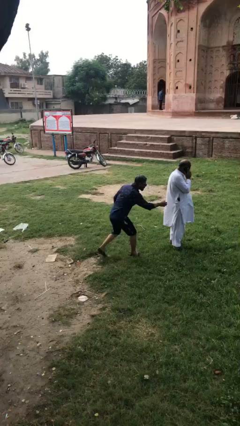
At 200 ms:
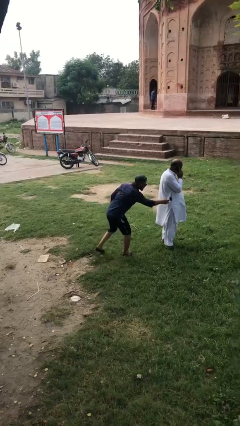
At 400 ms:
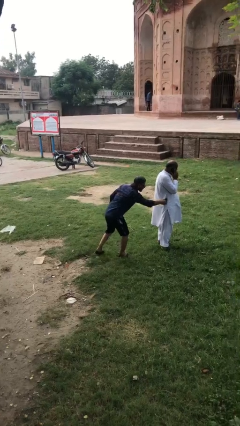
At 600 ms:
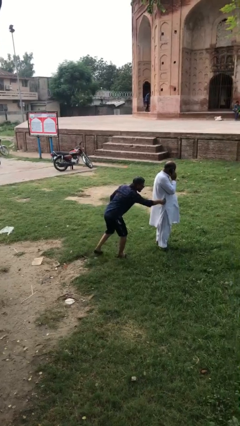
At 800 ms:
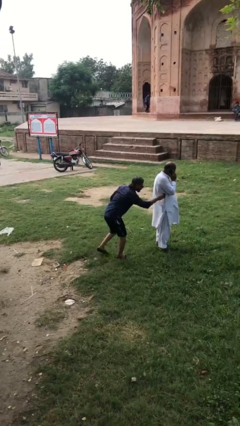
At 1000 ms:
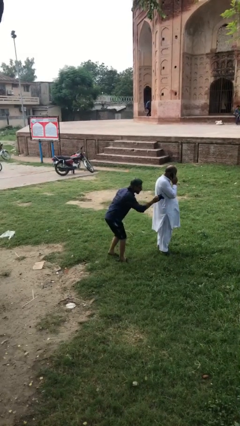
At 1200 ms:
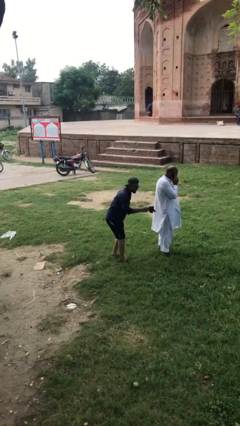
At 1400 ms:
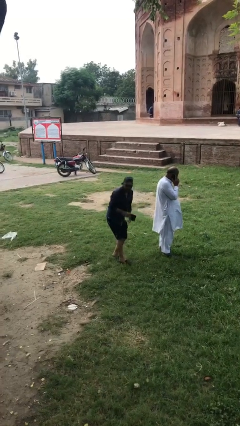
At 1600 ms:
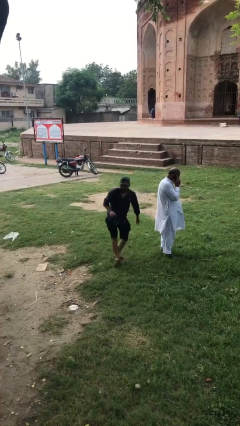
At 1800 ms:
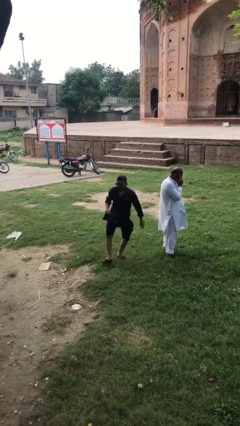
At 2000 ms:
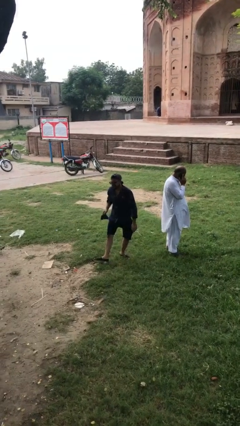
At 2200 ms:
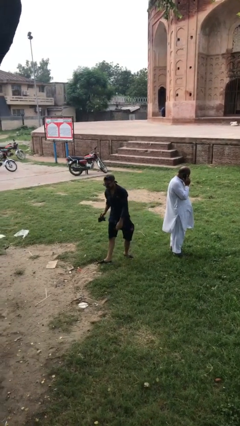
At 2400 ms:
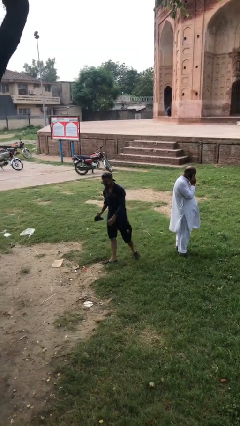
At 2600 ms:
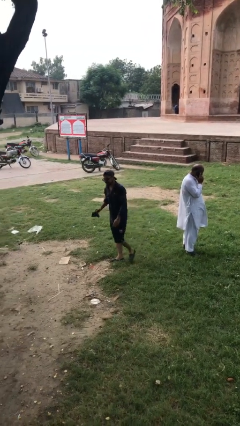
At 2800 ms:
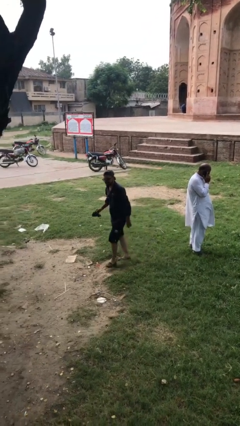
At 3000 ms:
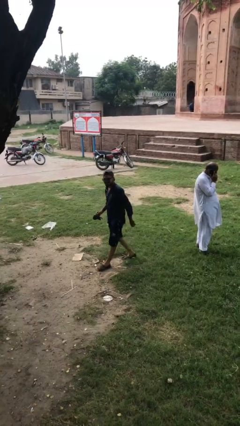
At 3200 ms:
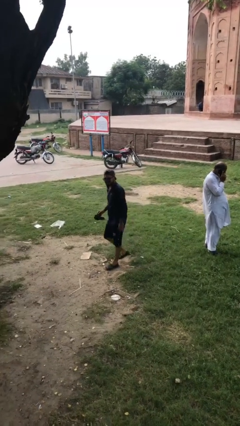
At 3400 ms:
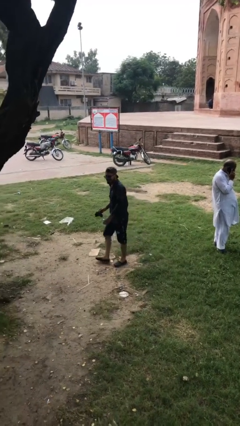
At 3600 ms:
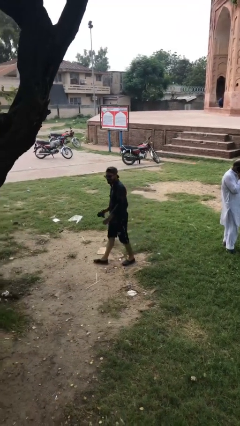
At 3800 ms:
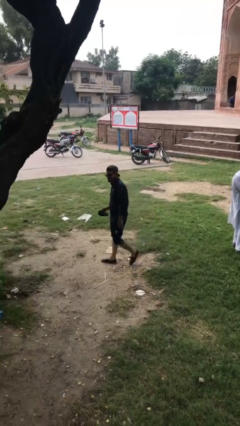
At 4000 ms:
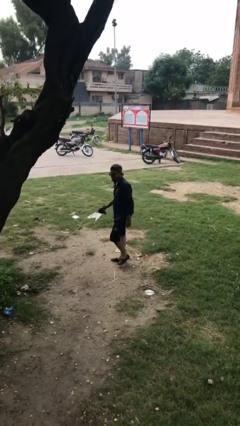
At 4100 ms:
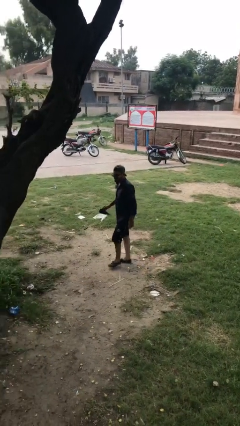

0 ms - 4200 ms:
person steals object from person

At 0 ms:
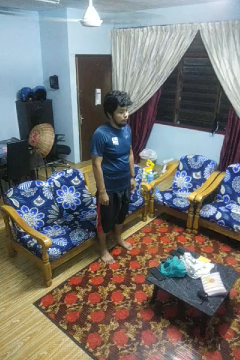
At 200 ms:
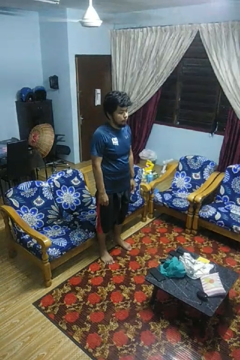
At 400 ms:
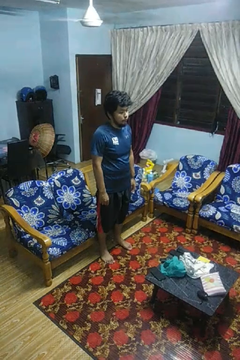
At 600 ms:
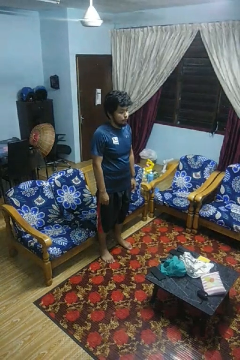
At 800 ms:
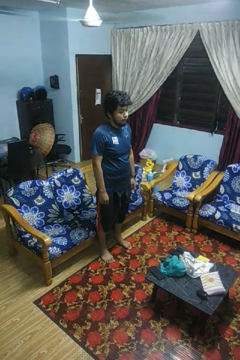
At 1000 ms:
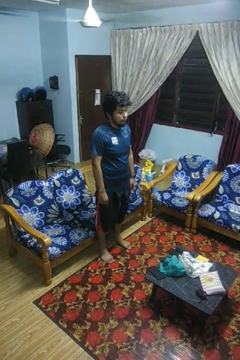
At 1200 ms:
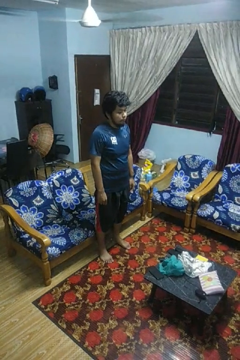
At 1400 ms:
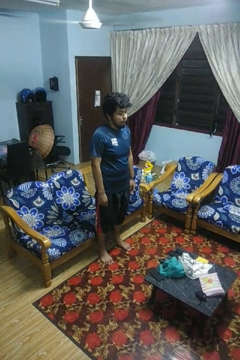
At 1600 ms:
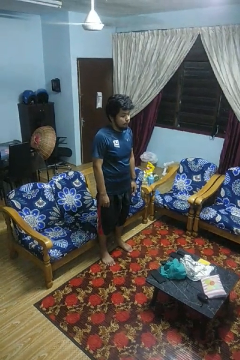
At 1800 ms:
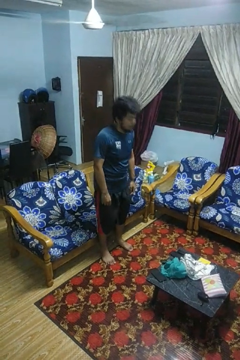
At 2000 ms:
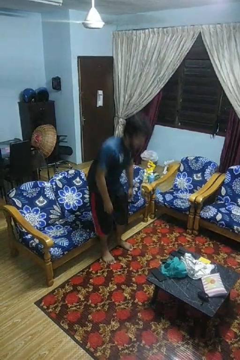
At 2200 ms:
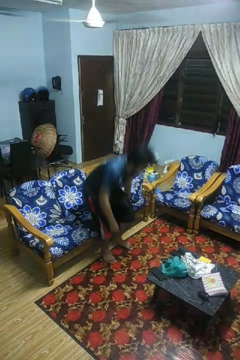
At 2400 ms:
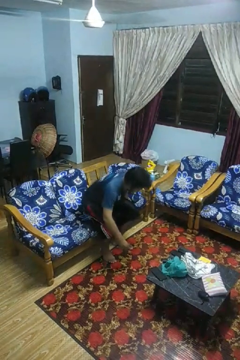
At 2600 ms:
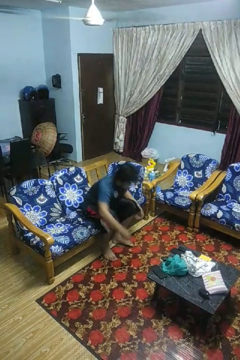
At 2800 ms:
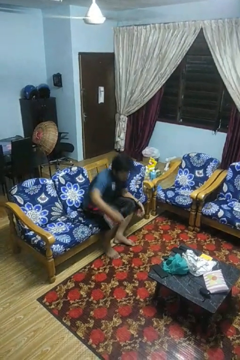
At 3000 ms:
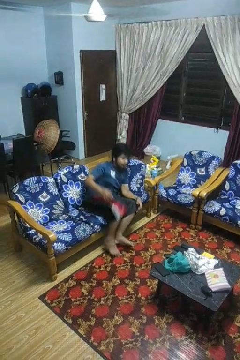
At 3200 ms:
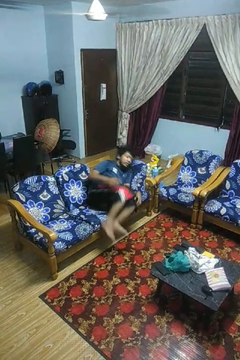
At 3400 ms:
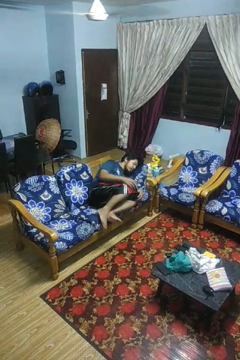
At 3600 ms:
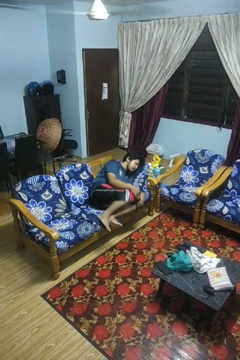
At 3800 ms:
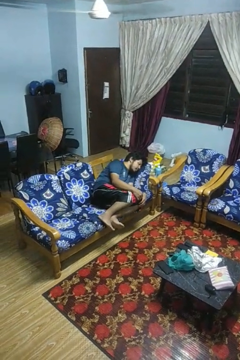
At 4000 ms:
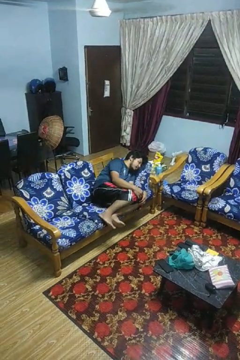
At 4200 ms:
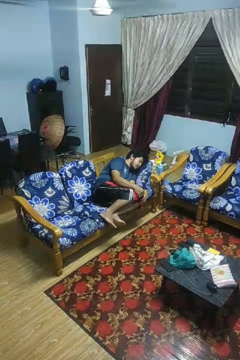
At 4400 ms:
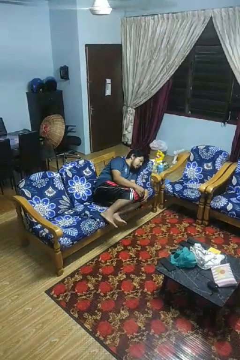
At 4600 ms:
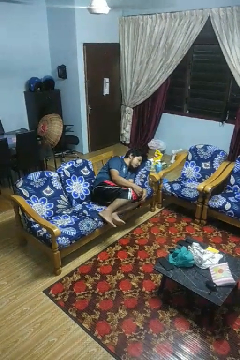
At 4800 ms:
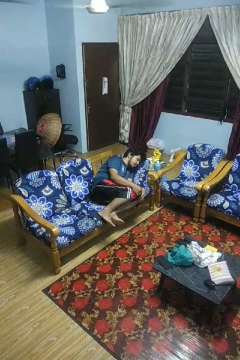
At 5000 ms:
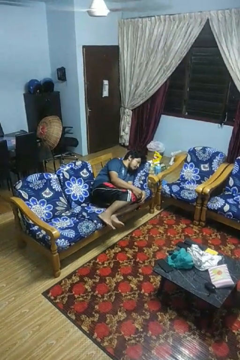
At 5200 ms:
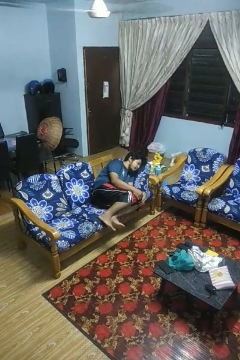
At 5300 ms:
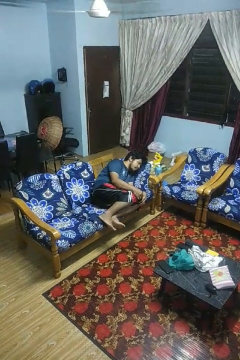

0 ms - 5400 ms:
person lies down on couch

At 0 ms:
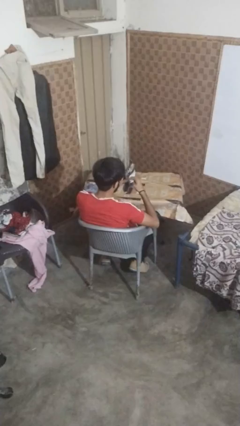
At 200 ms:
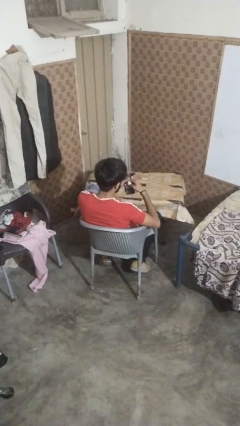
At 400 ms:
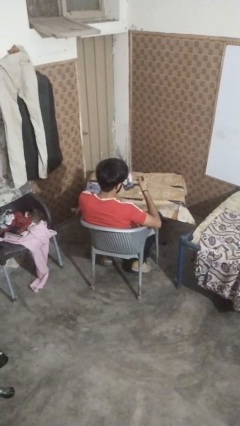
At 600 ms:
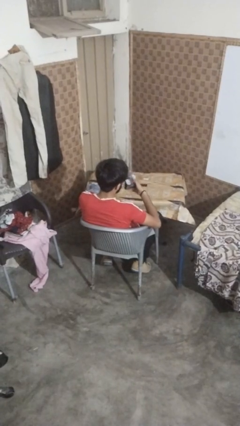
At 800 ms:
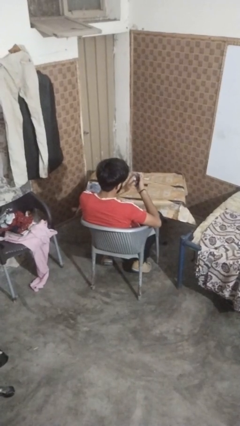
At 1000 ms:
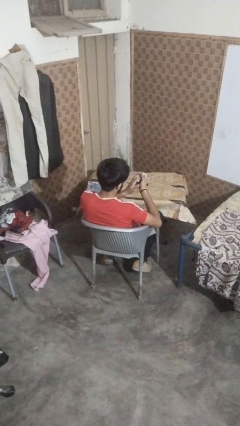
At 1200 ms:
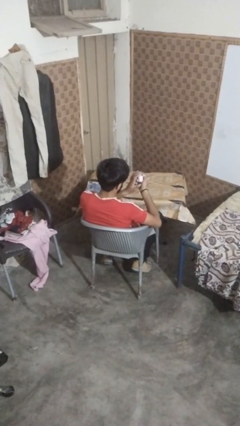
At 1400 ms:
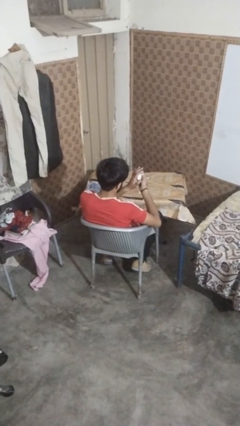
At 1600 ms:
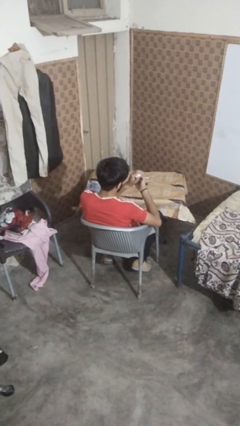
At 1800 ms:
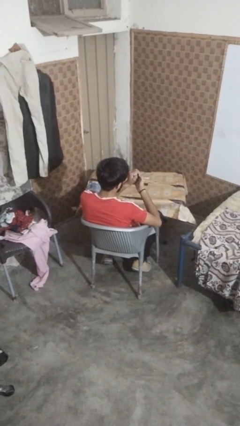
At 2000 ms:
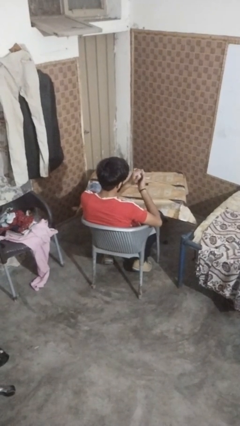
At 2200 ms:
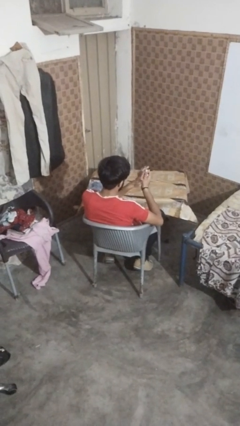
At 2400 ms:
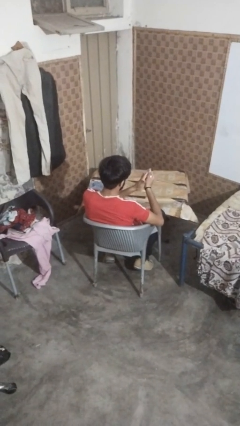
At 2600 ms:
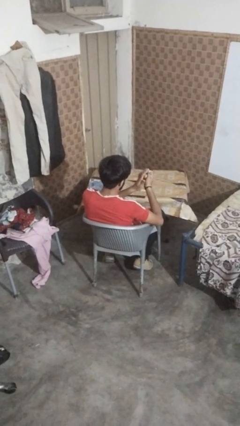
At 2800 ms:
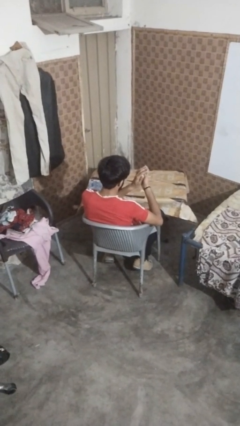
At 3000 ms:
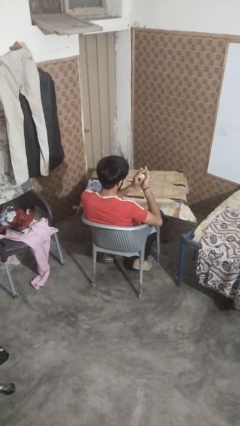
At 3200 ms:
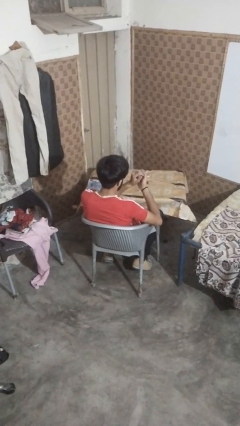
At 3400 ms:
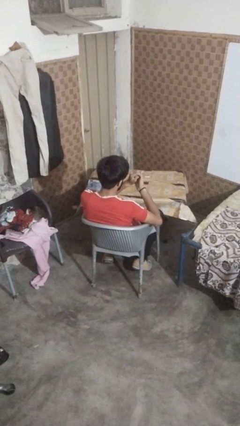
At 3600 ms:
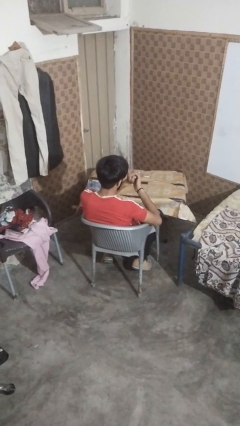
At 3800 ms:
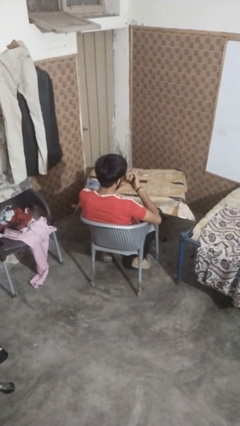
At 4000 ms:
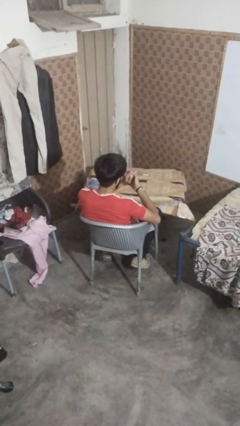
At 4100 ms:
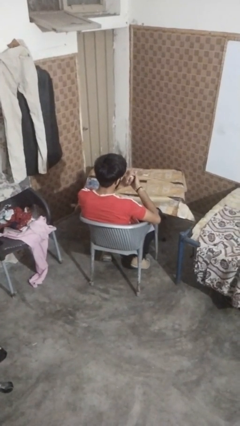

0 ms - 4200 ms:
person crumples paper

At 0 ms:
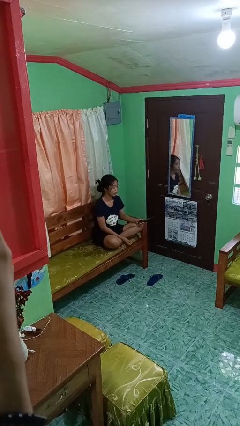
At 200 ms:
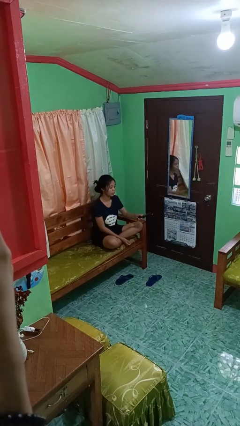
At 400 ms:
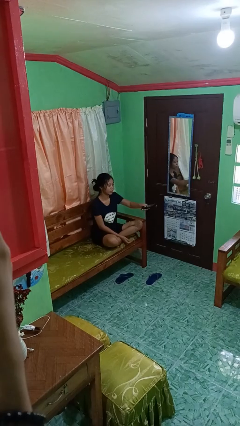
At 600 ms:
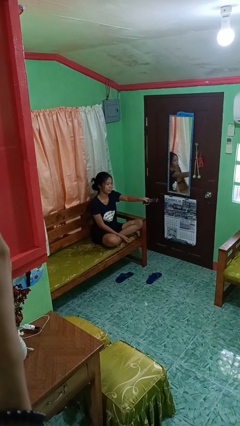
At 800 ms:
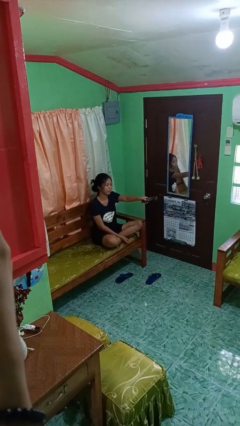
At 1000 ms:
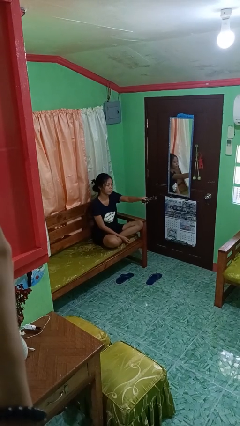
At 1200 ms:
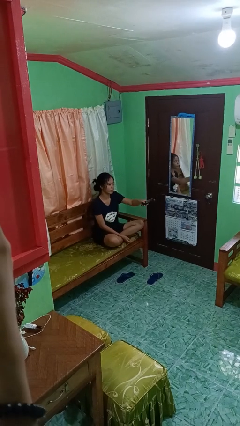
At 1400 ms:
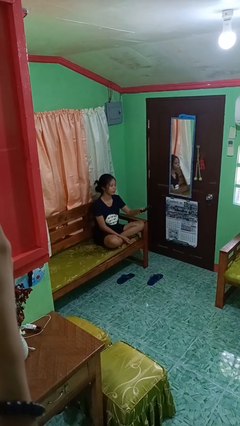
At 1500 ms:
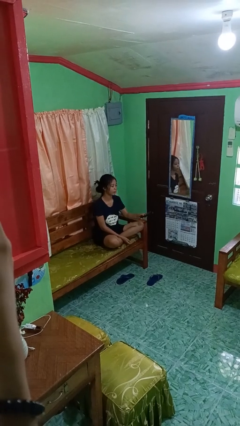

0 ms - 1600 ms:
person uses television remote

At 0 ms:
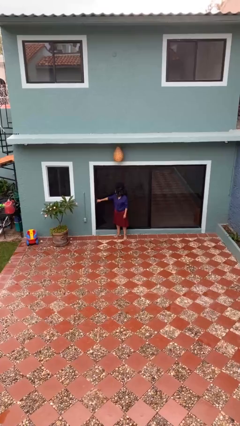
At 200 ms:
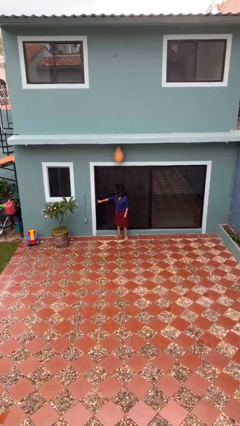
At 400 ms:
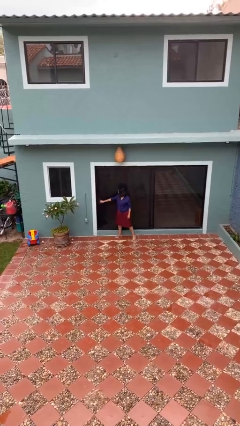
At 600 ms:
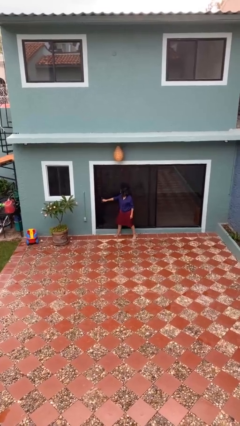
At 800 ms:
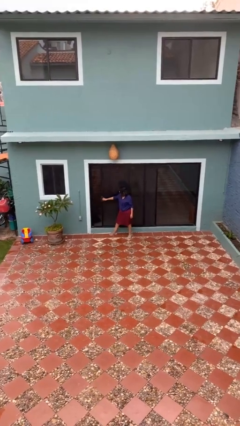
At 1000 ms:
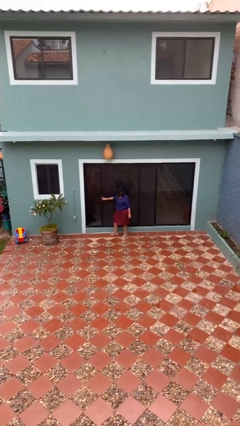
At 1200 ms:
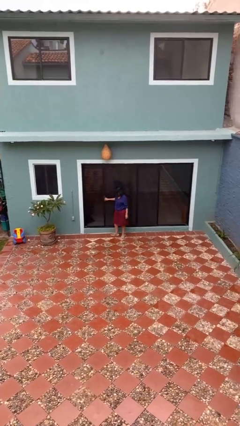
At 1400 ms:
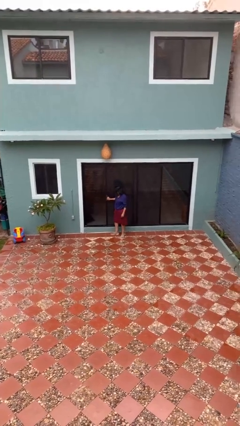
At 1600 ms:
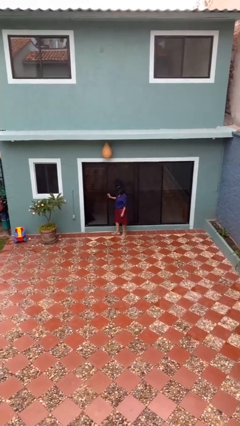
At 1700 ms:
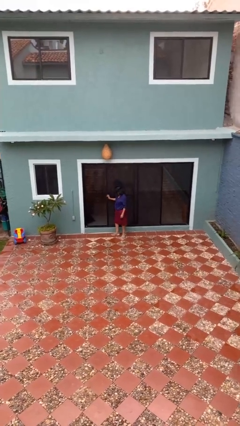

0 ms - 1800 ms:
person opens sliding door

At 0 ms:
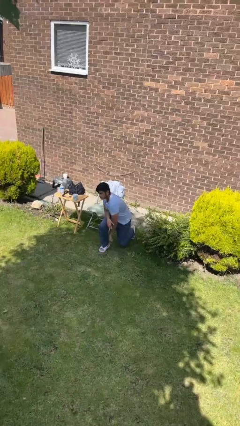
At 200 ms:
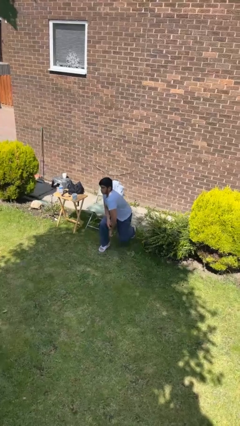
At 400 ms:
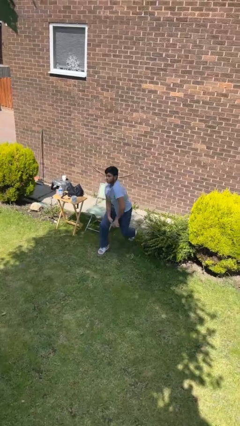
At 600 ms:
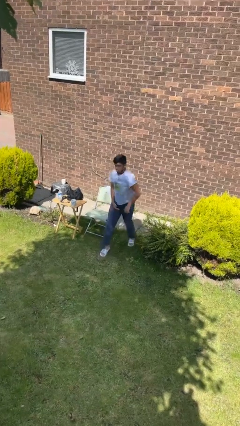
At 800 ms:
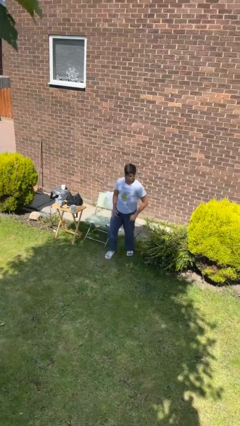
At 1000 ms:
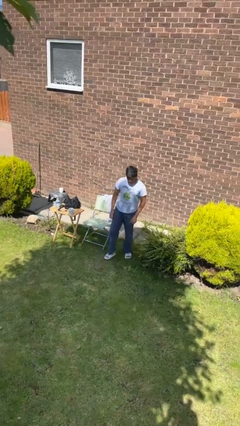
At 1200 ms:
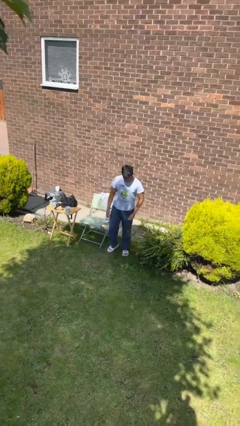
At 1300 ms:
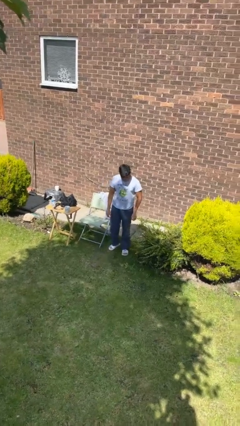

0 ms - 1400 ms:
person stands up from floor

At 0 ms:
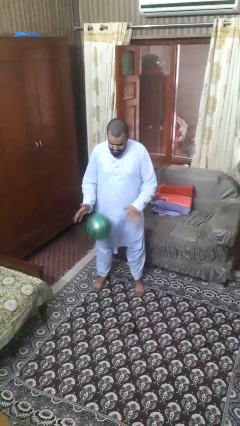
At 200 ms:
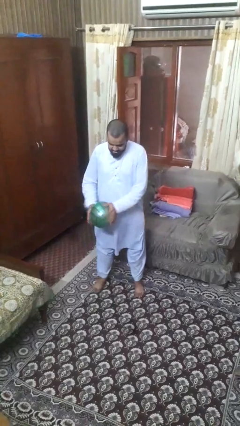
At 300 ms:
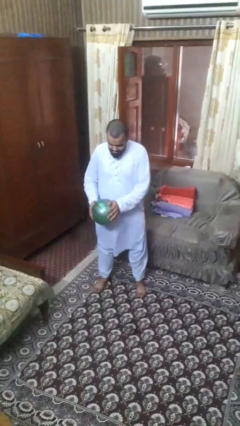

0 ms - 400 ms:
person bounces ball on floor
